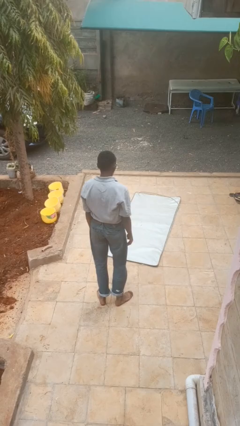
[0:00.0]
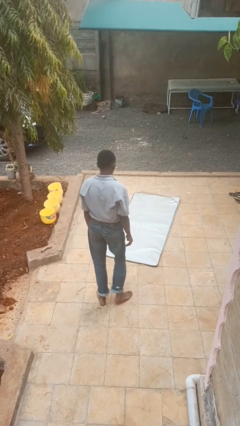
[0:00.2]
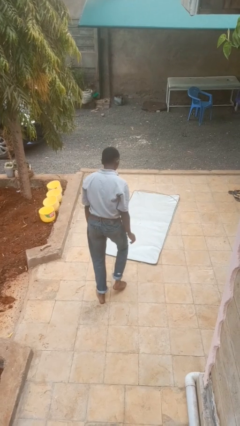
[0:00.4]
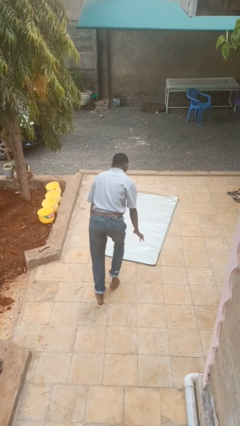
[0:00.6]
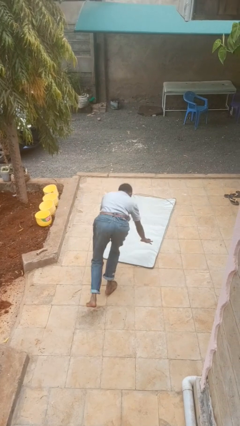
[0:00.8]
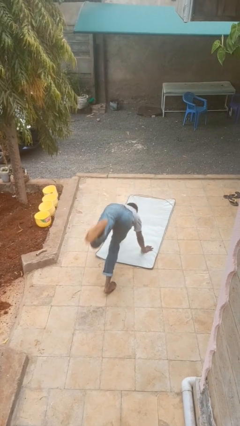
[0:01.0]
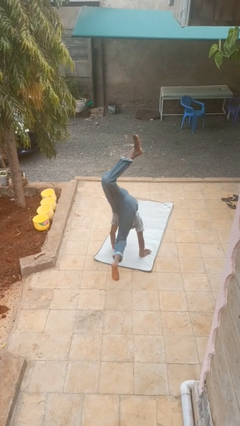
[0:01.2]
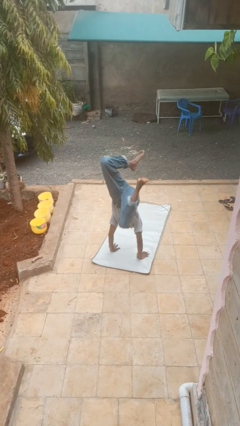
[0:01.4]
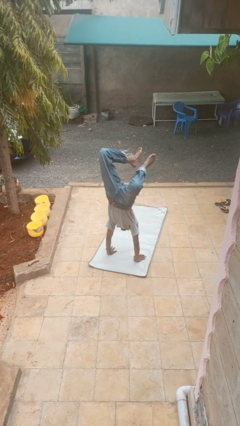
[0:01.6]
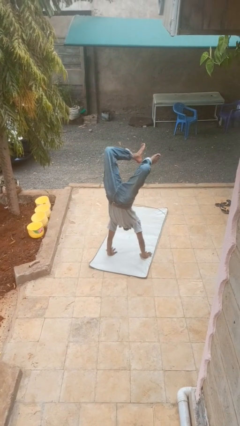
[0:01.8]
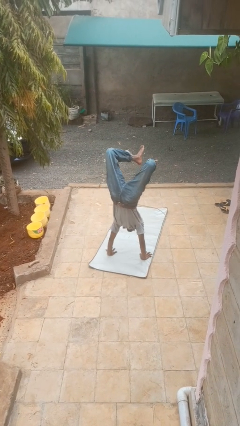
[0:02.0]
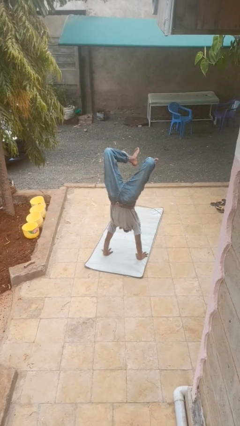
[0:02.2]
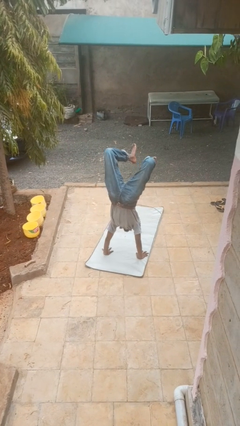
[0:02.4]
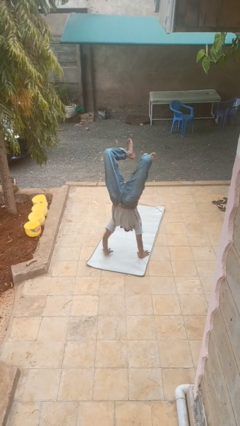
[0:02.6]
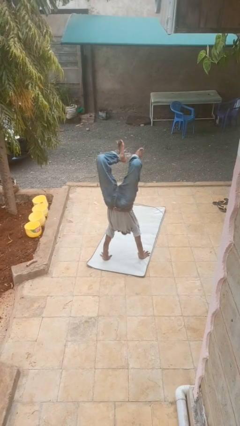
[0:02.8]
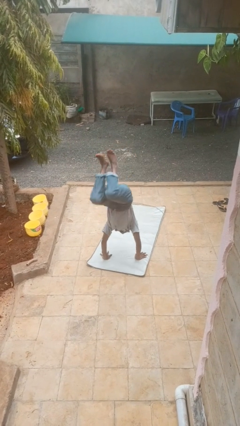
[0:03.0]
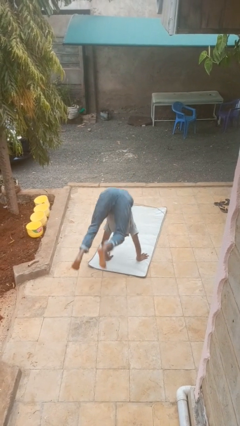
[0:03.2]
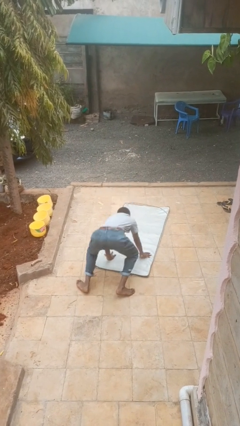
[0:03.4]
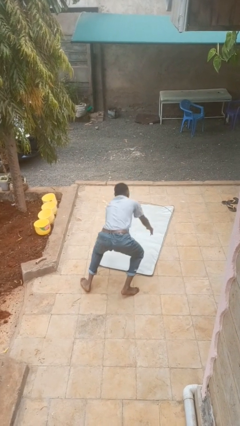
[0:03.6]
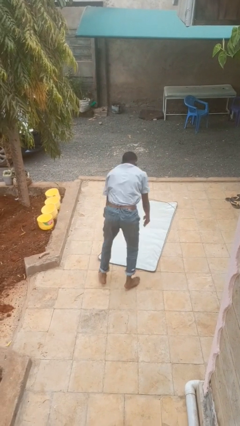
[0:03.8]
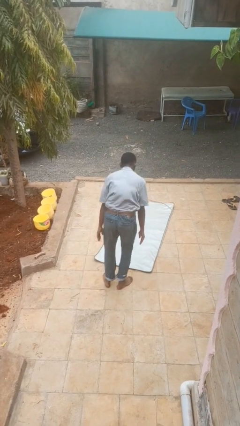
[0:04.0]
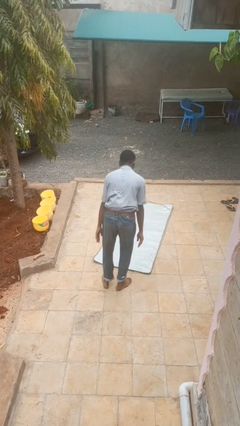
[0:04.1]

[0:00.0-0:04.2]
person handstand

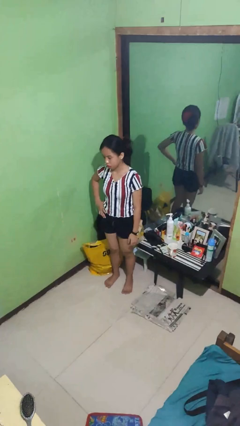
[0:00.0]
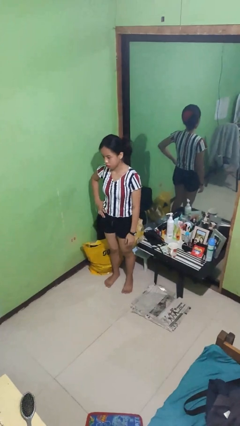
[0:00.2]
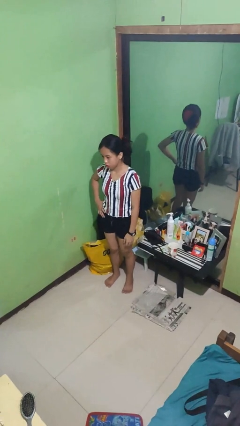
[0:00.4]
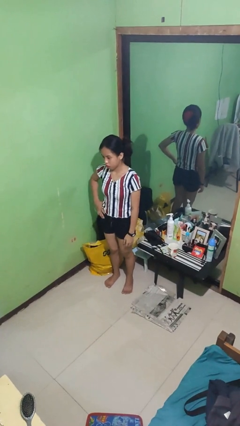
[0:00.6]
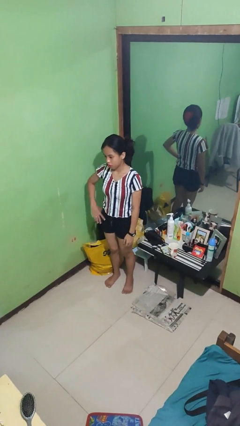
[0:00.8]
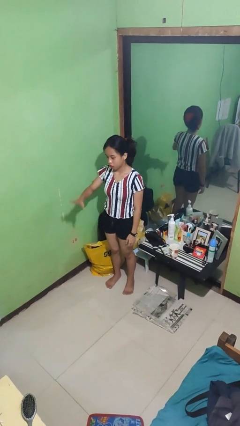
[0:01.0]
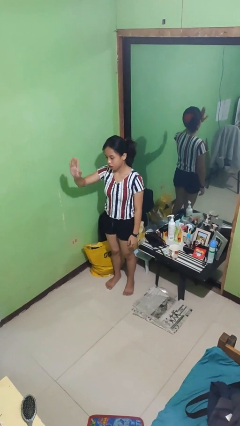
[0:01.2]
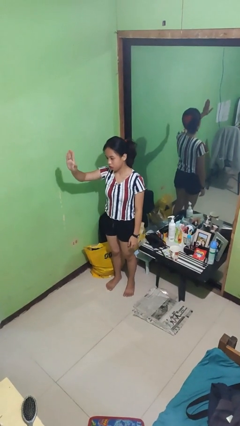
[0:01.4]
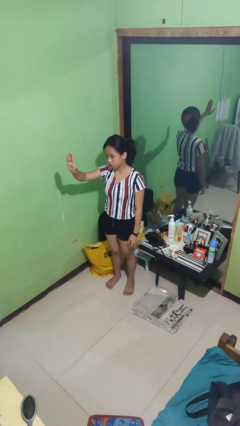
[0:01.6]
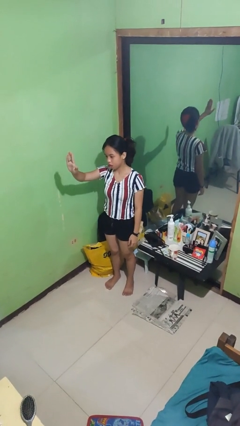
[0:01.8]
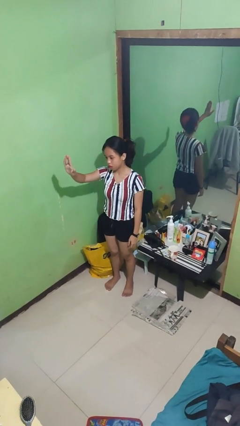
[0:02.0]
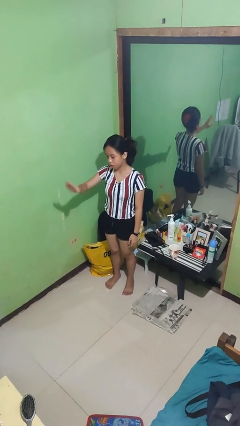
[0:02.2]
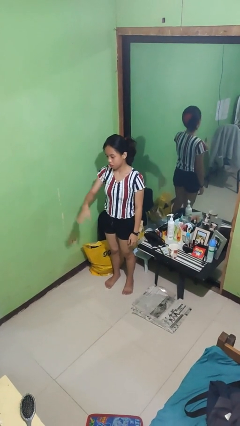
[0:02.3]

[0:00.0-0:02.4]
person gestures stop

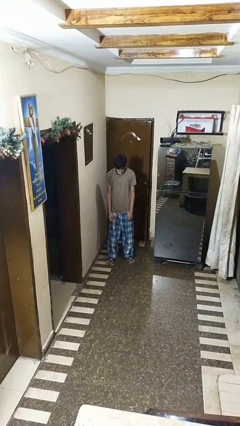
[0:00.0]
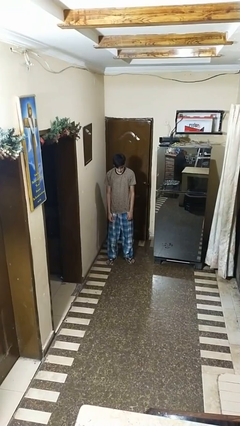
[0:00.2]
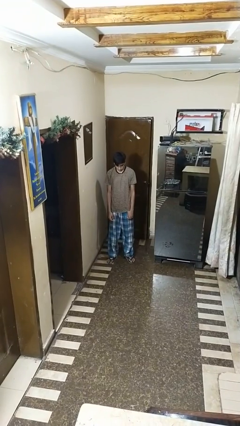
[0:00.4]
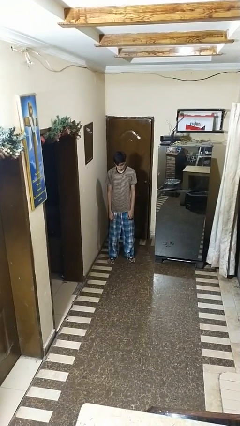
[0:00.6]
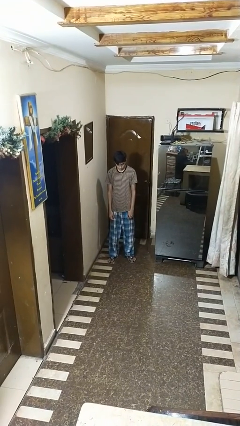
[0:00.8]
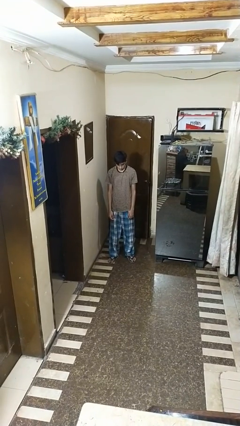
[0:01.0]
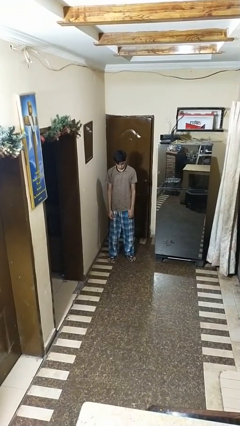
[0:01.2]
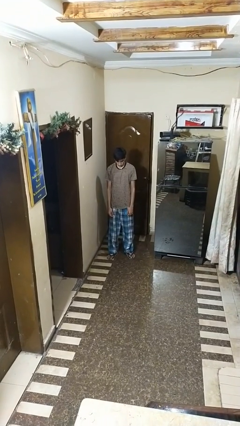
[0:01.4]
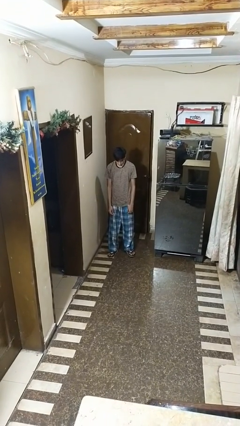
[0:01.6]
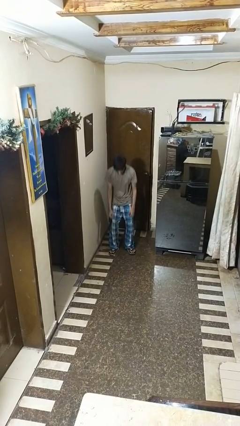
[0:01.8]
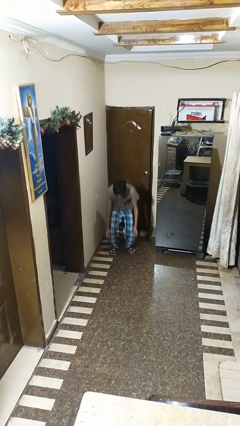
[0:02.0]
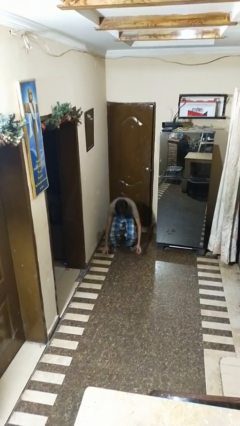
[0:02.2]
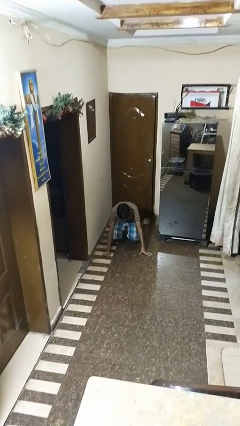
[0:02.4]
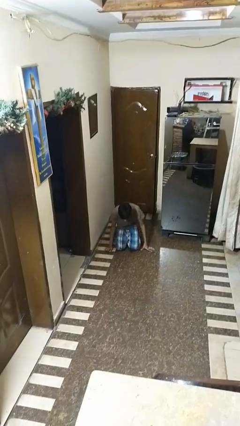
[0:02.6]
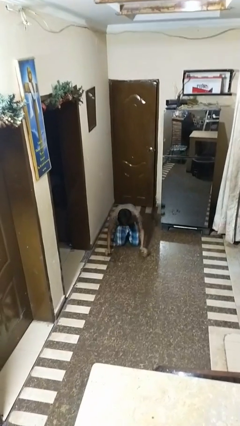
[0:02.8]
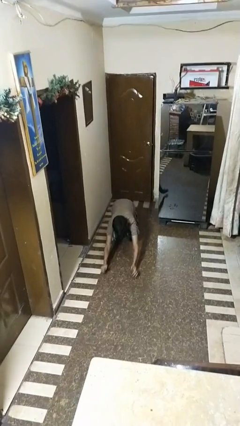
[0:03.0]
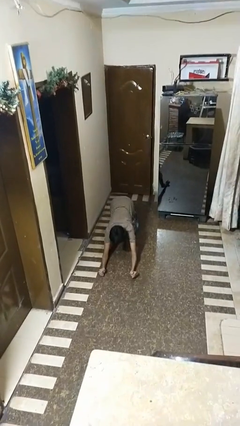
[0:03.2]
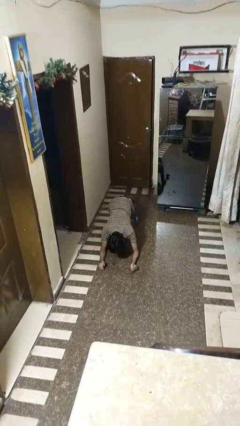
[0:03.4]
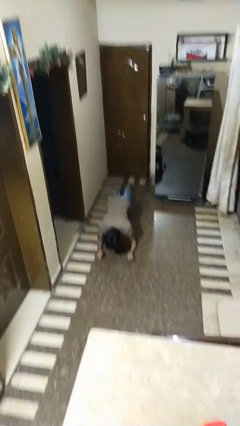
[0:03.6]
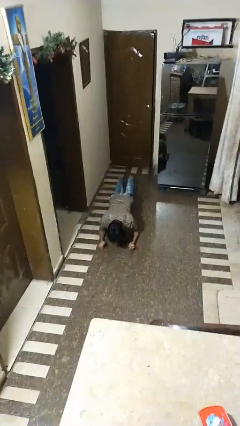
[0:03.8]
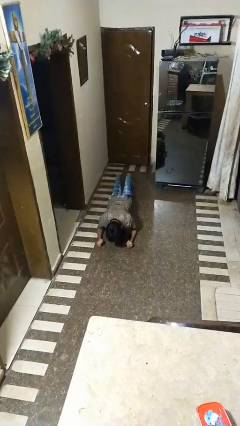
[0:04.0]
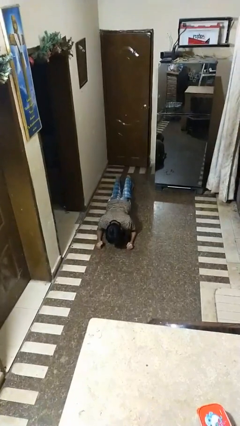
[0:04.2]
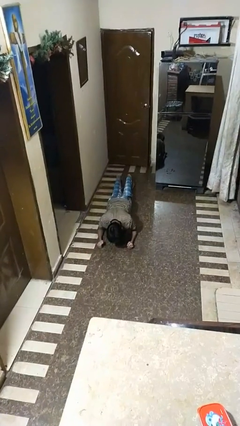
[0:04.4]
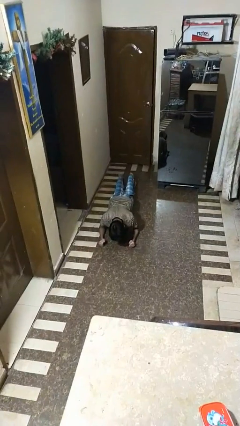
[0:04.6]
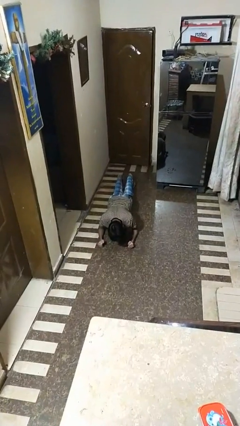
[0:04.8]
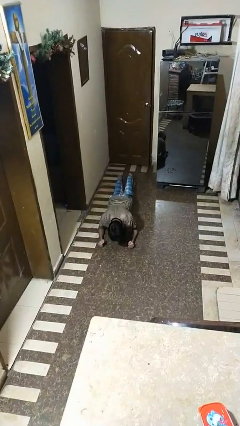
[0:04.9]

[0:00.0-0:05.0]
person exercises with plank

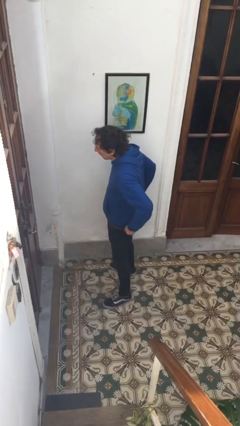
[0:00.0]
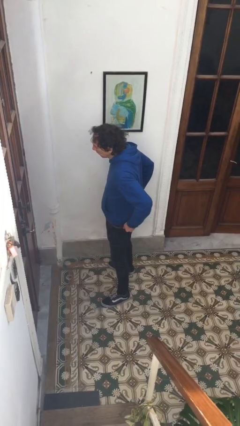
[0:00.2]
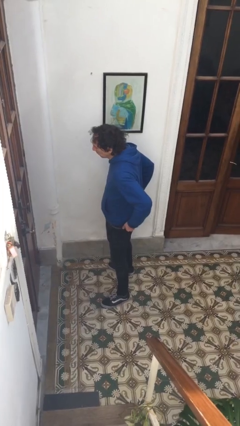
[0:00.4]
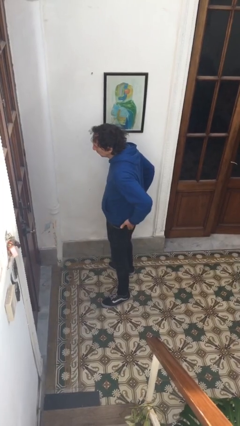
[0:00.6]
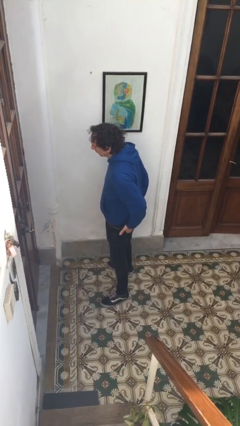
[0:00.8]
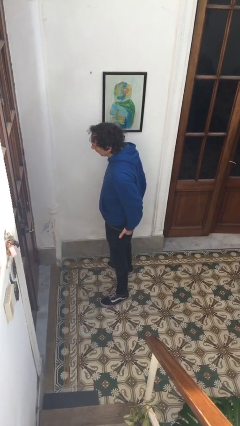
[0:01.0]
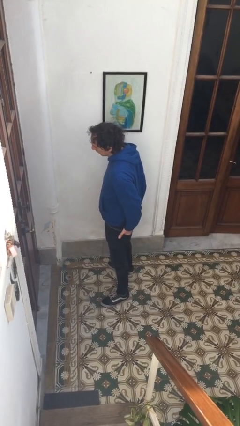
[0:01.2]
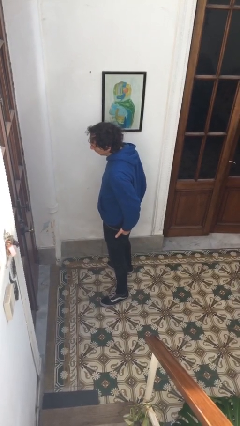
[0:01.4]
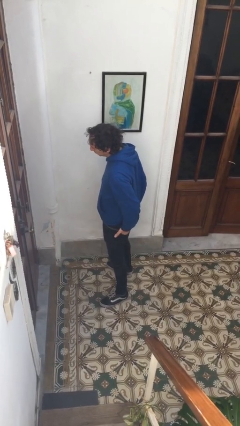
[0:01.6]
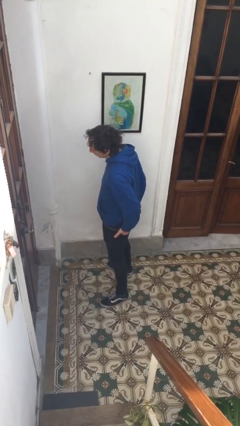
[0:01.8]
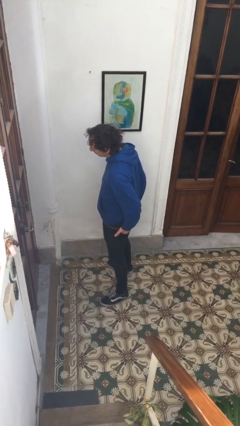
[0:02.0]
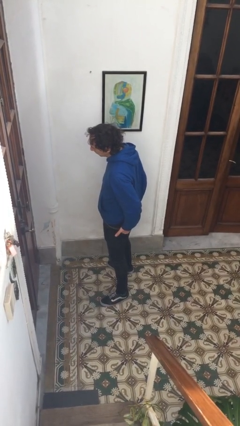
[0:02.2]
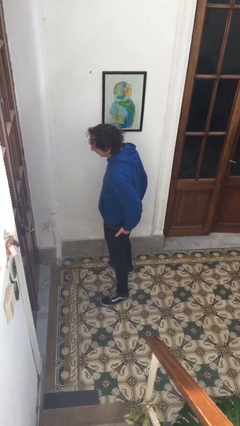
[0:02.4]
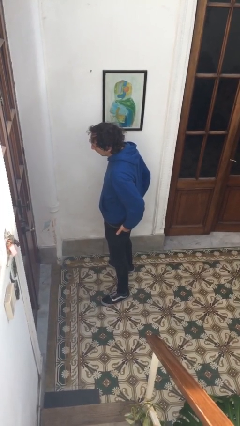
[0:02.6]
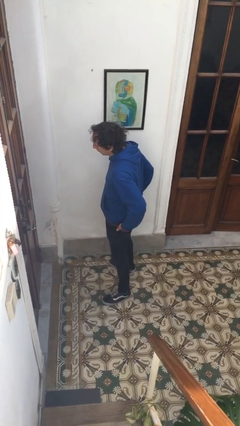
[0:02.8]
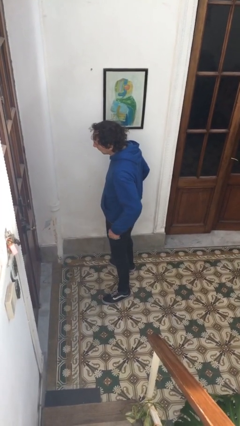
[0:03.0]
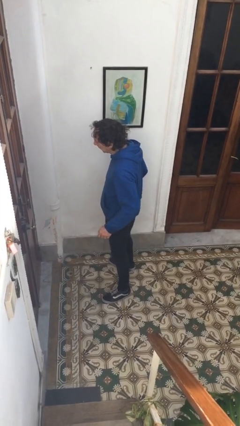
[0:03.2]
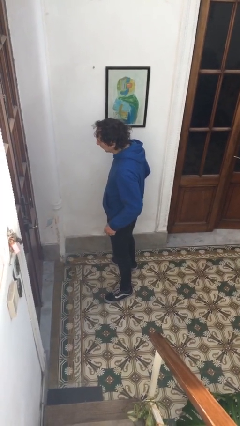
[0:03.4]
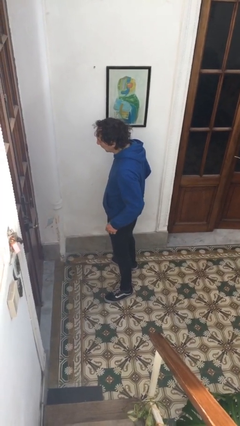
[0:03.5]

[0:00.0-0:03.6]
person puts hands in back pockets

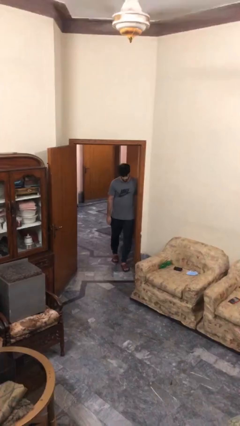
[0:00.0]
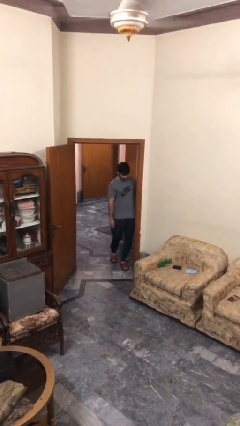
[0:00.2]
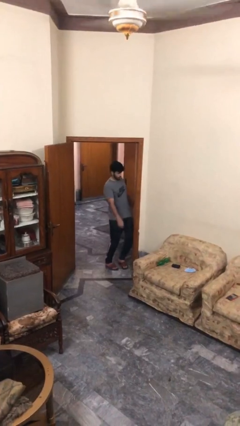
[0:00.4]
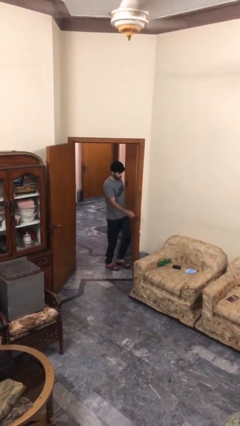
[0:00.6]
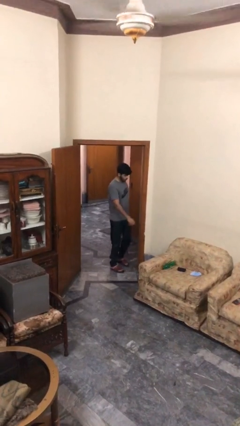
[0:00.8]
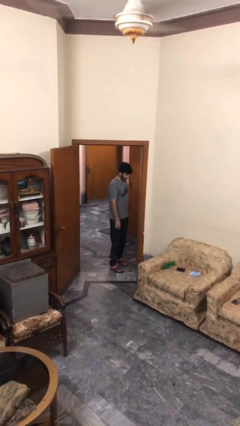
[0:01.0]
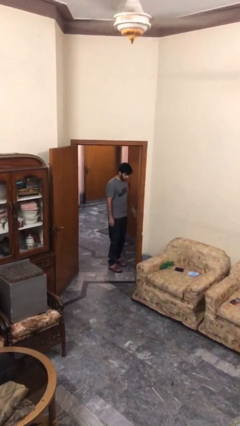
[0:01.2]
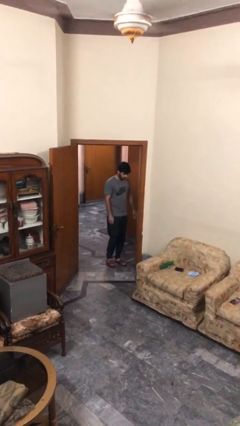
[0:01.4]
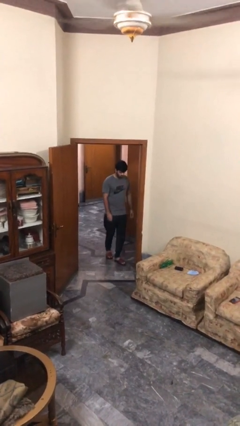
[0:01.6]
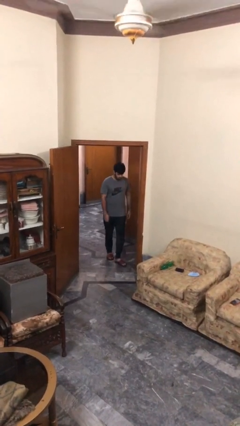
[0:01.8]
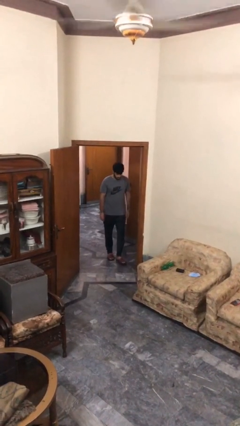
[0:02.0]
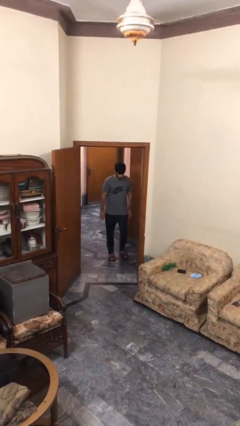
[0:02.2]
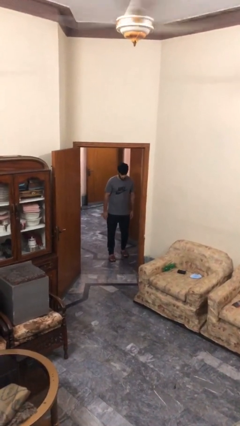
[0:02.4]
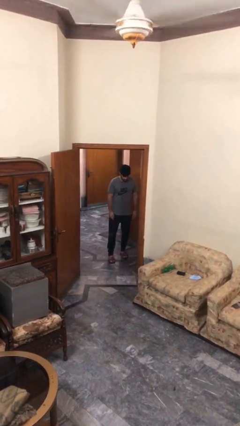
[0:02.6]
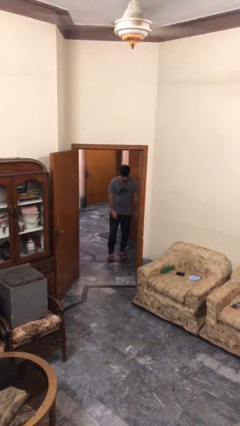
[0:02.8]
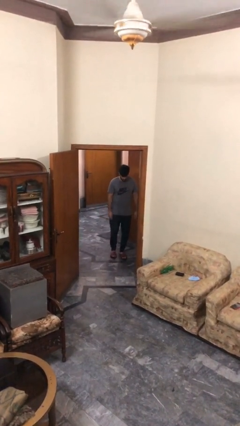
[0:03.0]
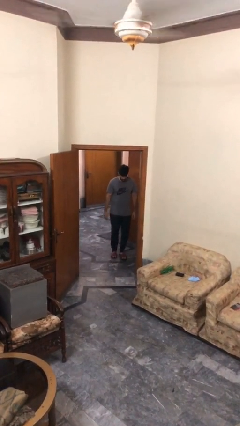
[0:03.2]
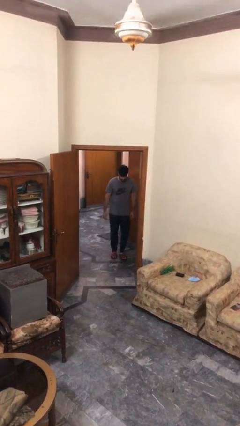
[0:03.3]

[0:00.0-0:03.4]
person bumps into wall
